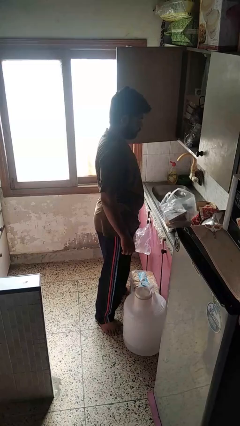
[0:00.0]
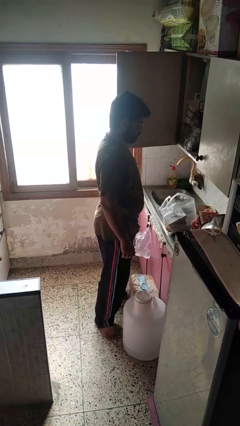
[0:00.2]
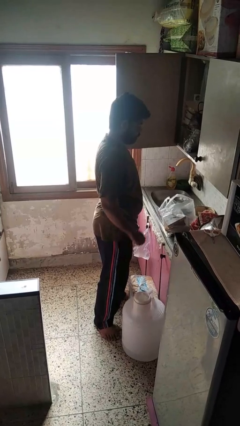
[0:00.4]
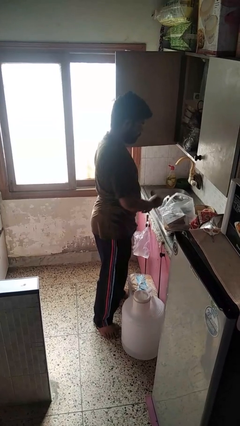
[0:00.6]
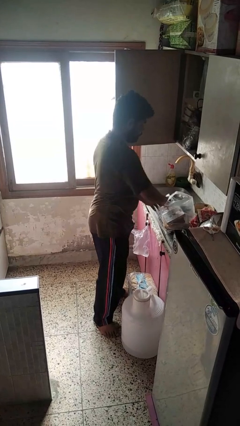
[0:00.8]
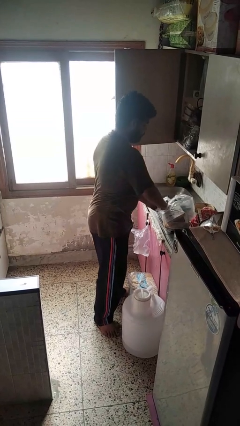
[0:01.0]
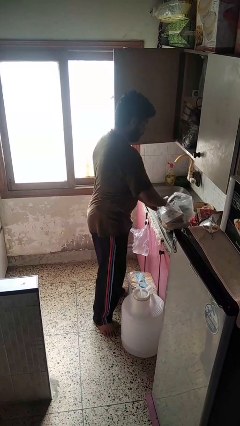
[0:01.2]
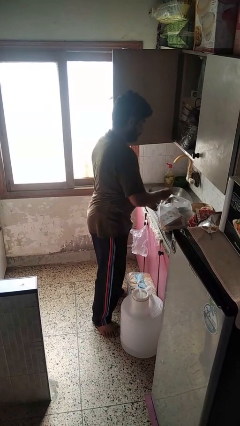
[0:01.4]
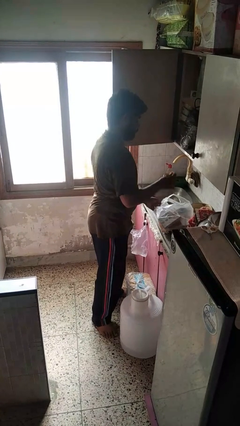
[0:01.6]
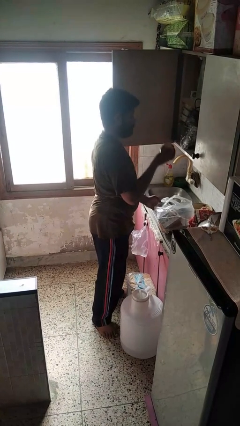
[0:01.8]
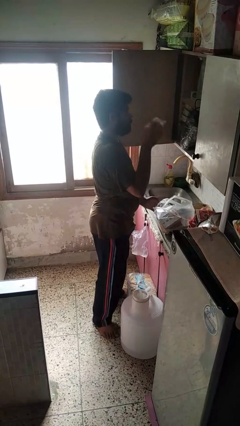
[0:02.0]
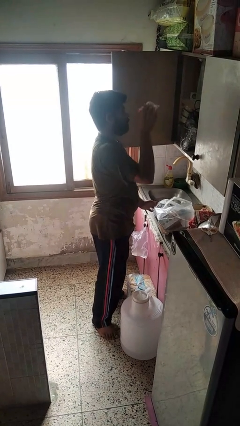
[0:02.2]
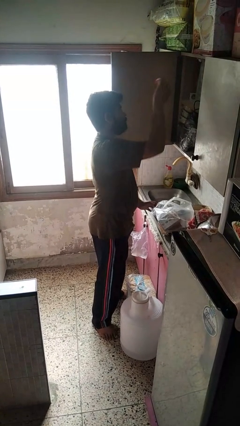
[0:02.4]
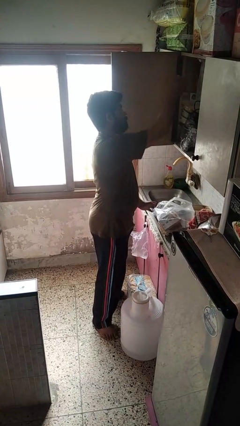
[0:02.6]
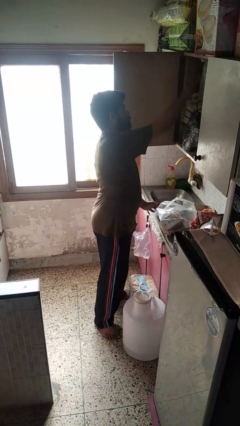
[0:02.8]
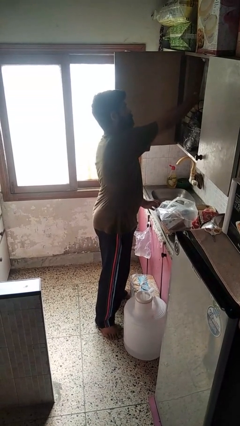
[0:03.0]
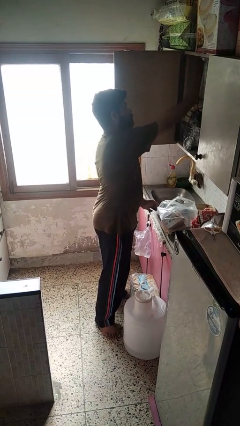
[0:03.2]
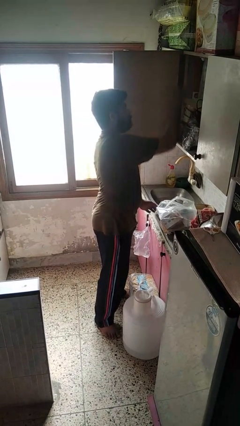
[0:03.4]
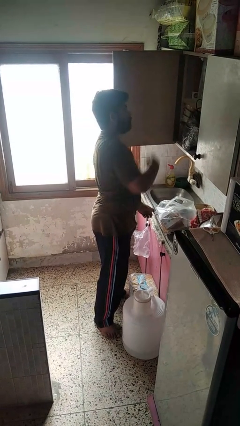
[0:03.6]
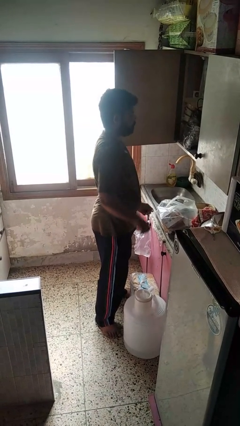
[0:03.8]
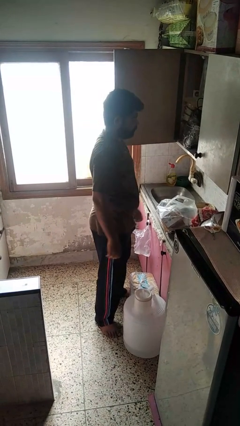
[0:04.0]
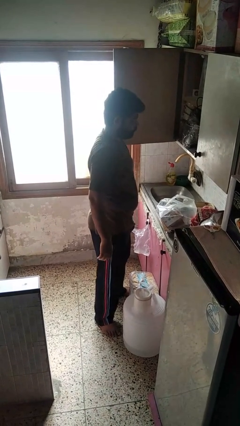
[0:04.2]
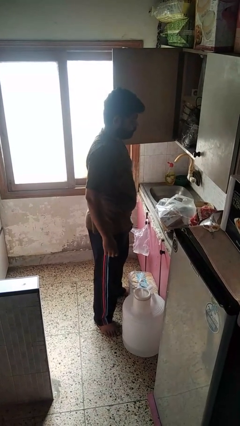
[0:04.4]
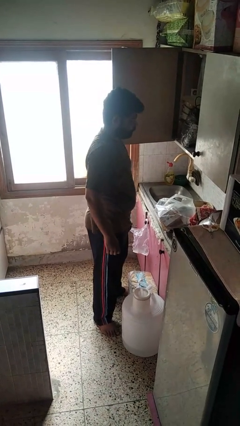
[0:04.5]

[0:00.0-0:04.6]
person loads groceries into cabinet

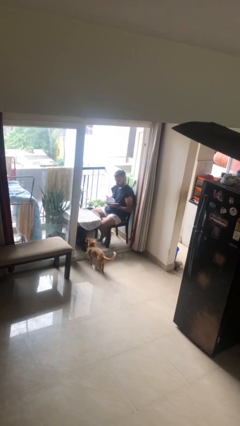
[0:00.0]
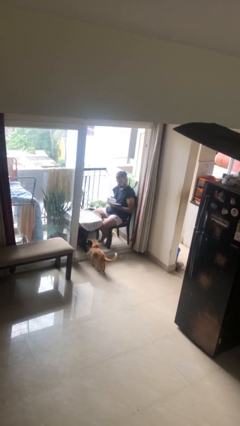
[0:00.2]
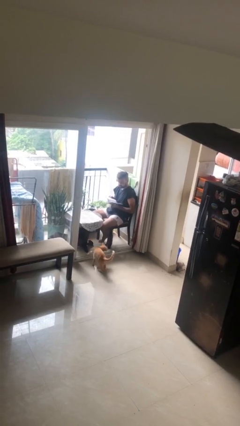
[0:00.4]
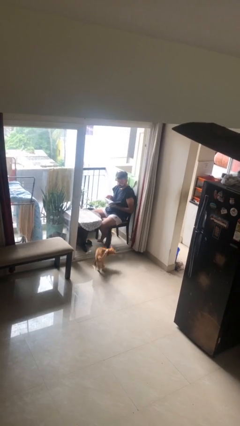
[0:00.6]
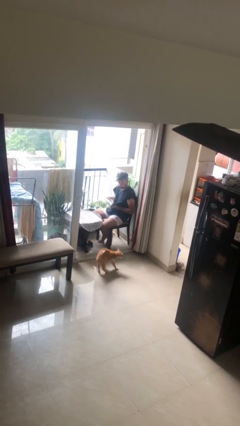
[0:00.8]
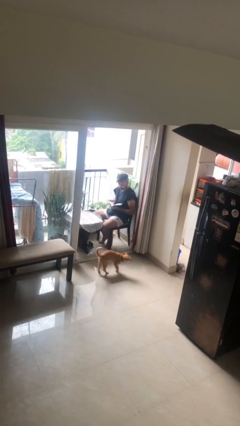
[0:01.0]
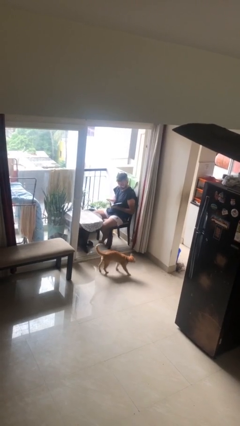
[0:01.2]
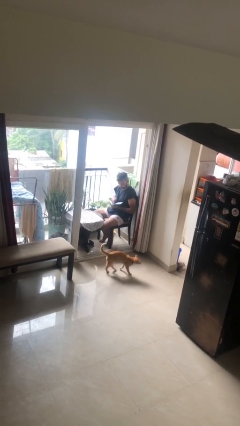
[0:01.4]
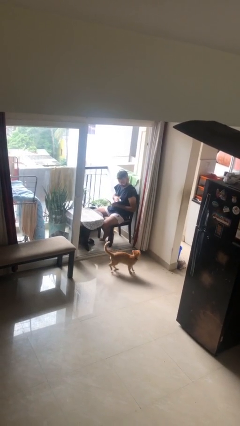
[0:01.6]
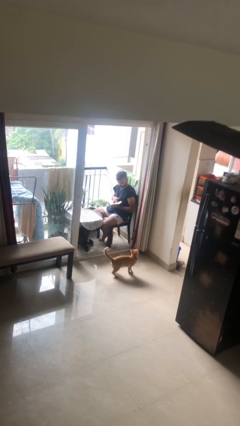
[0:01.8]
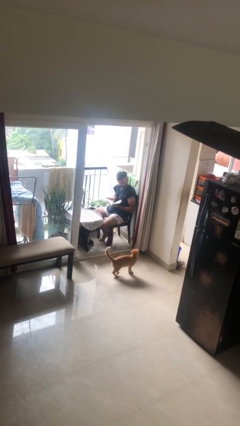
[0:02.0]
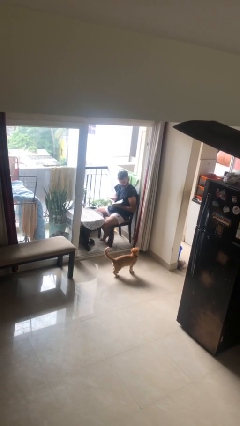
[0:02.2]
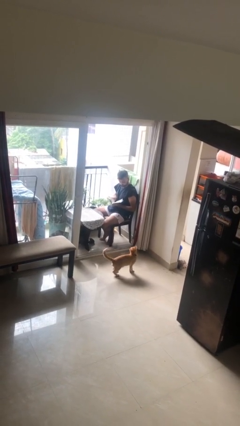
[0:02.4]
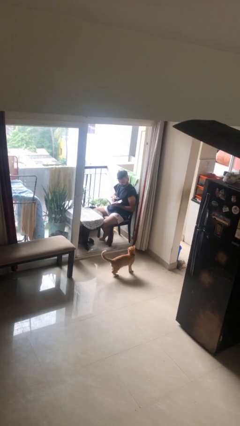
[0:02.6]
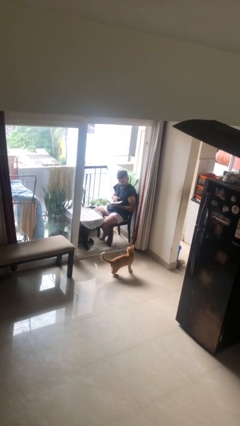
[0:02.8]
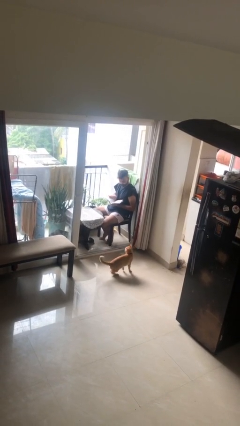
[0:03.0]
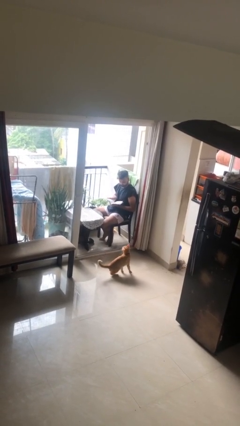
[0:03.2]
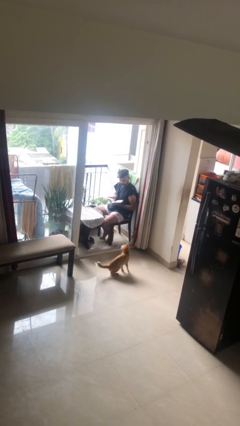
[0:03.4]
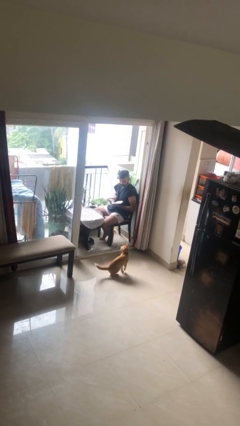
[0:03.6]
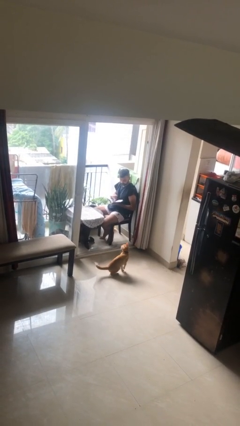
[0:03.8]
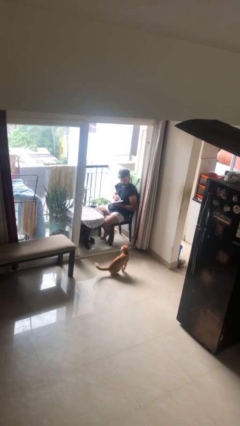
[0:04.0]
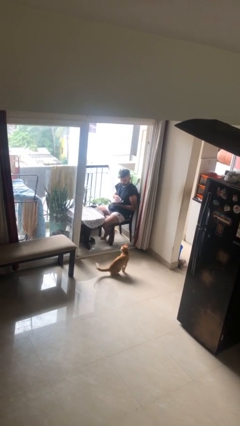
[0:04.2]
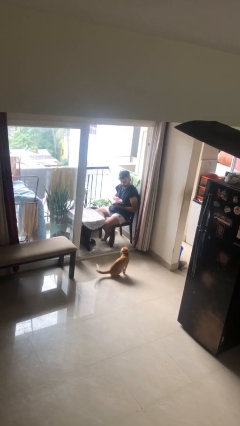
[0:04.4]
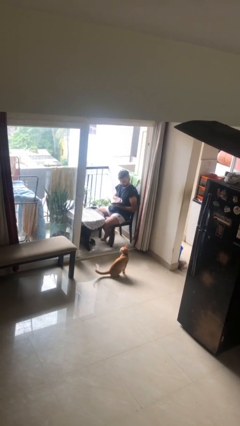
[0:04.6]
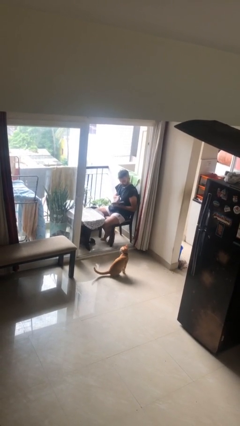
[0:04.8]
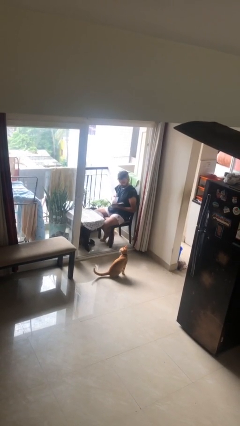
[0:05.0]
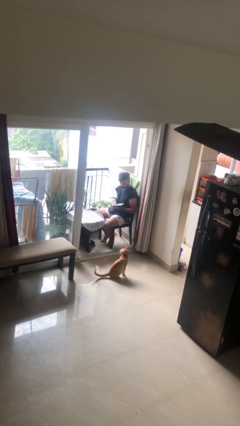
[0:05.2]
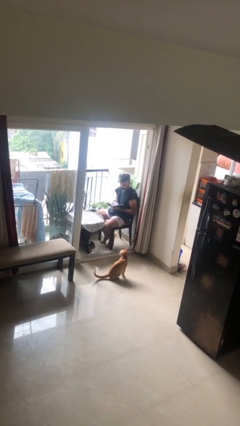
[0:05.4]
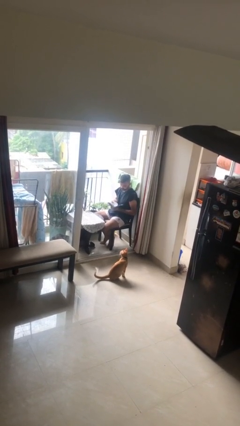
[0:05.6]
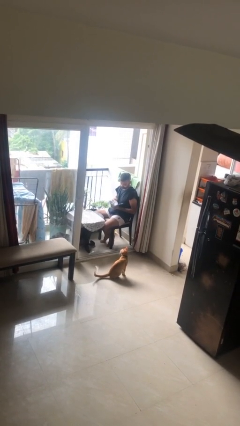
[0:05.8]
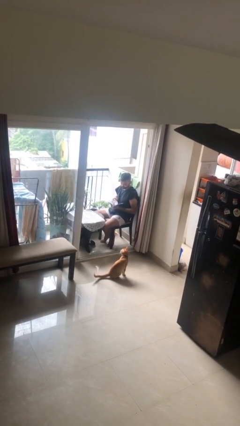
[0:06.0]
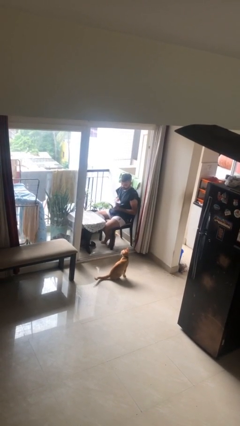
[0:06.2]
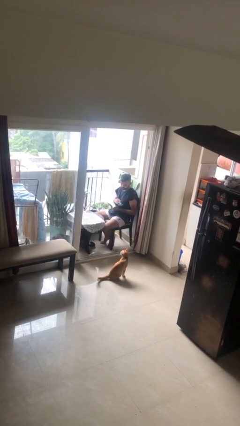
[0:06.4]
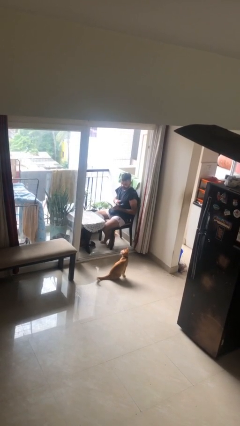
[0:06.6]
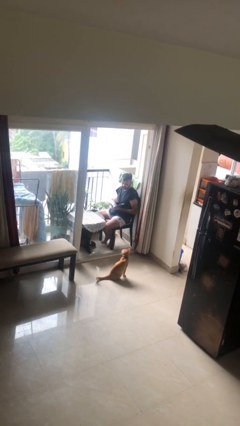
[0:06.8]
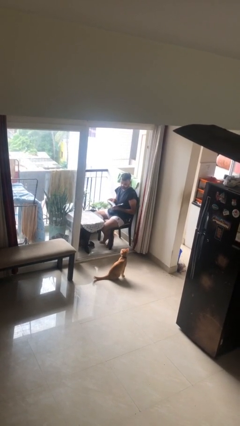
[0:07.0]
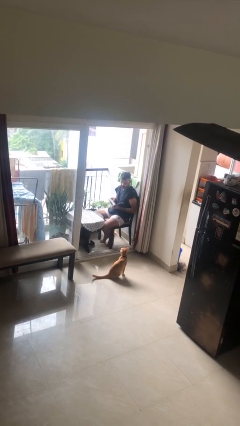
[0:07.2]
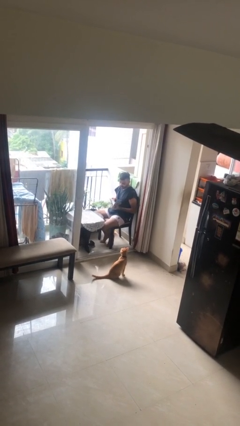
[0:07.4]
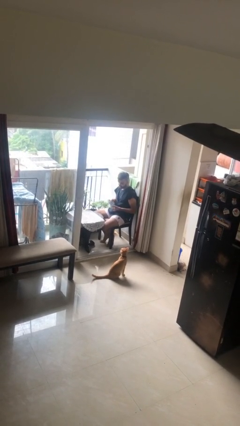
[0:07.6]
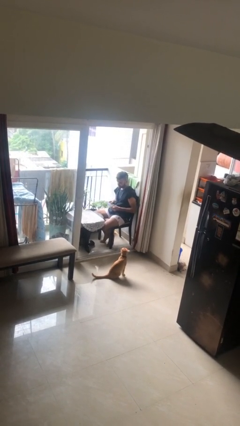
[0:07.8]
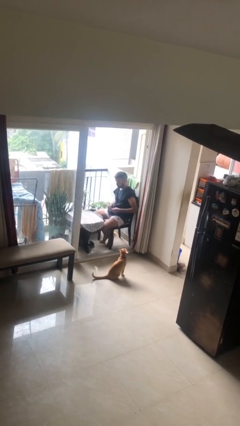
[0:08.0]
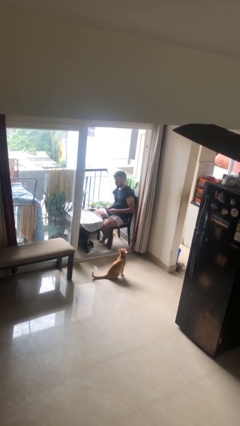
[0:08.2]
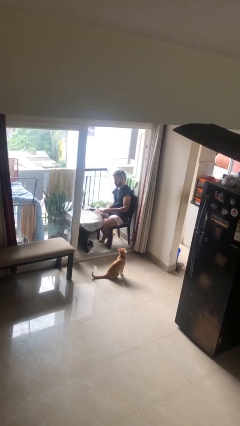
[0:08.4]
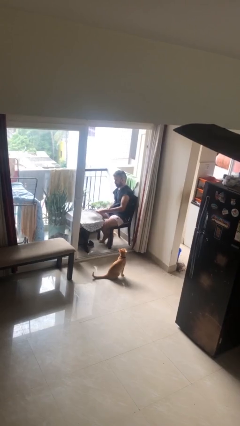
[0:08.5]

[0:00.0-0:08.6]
person reads document

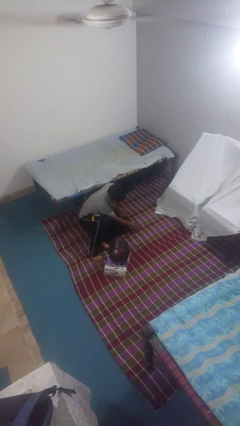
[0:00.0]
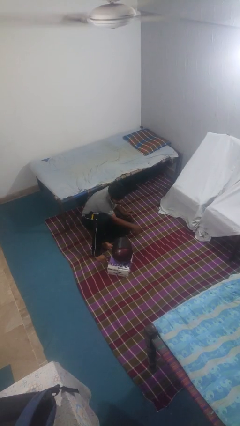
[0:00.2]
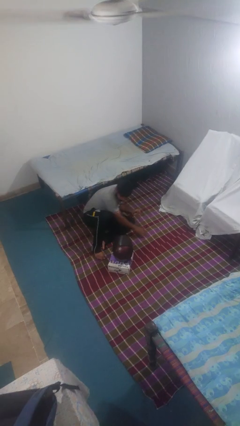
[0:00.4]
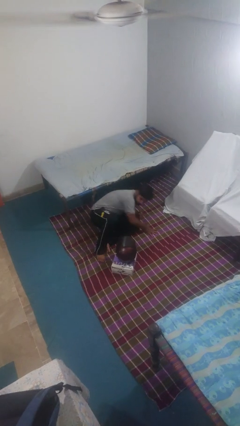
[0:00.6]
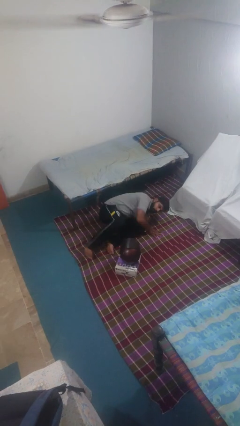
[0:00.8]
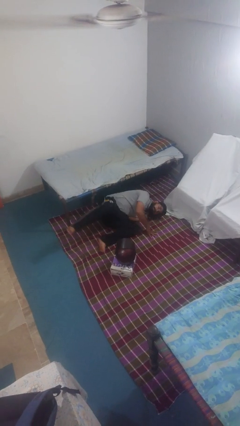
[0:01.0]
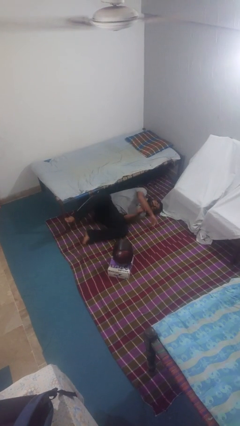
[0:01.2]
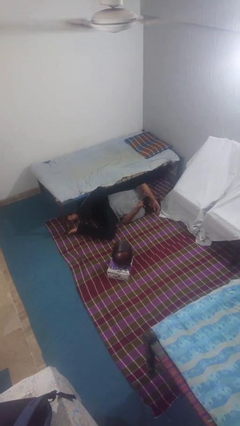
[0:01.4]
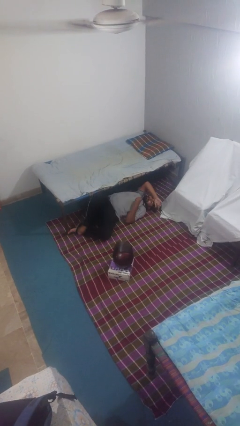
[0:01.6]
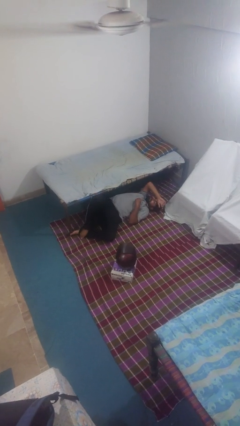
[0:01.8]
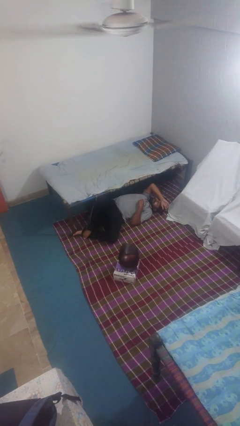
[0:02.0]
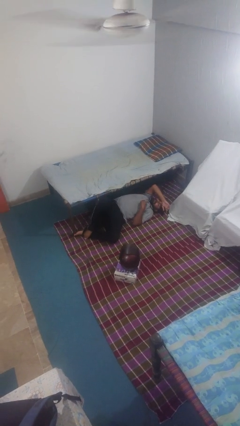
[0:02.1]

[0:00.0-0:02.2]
person lies down on floor

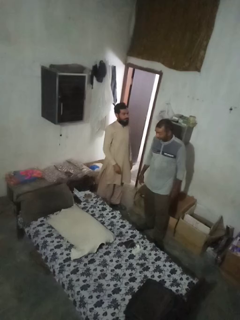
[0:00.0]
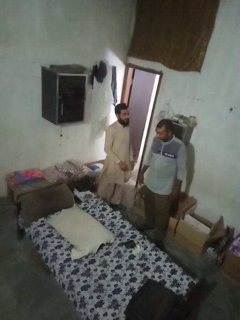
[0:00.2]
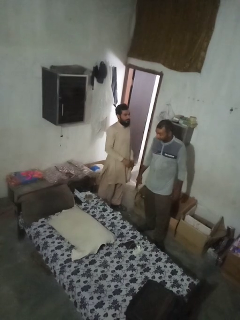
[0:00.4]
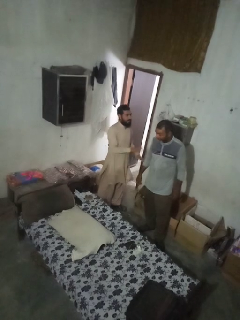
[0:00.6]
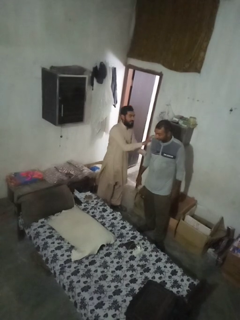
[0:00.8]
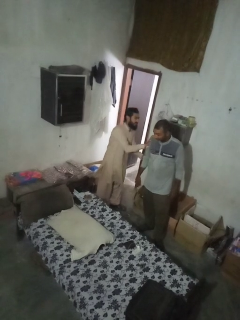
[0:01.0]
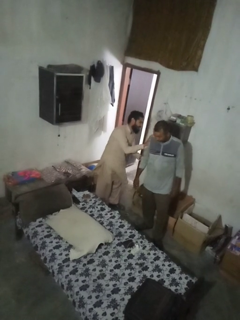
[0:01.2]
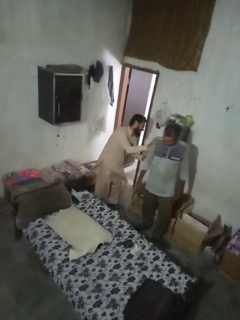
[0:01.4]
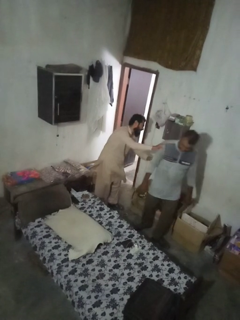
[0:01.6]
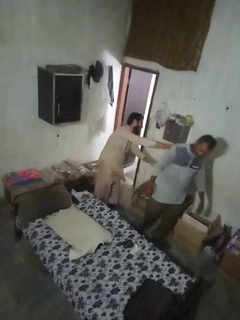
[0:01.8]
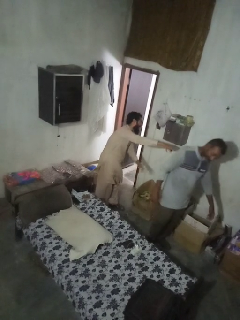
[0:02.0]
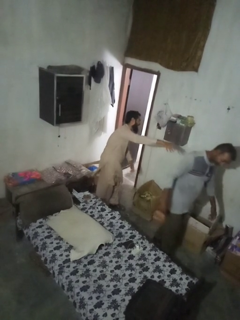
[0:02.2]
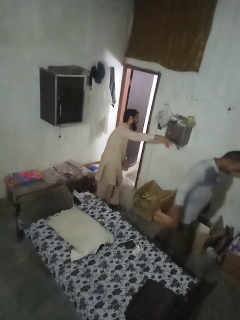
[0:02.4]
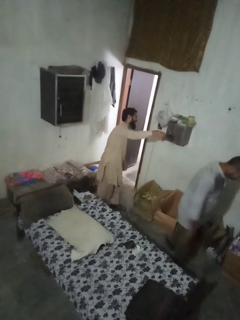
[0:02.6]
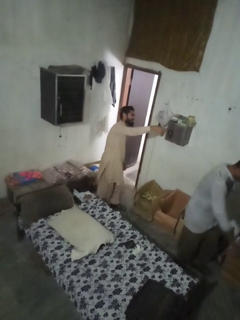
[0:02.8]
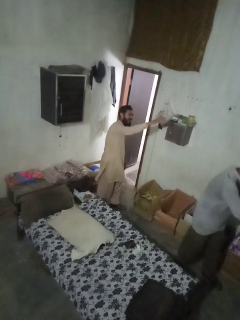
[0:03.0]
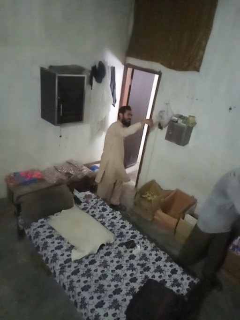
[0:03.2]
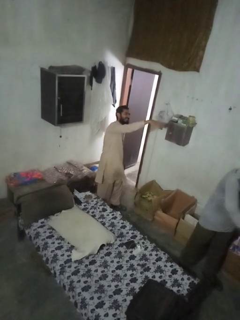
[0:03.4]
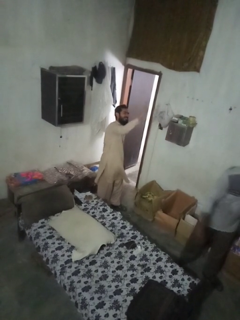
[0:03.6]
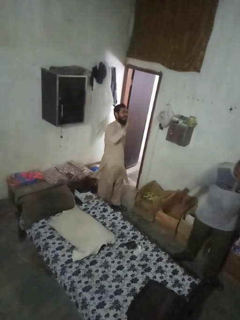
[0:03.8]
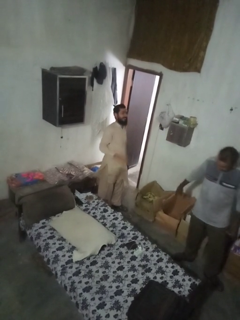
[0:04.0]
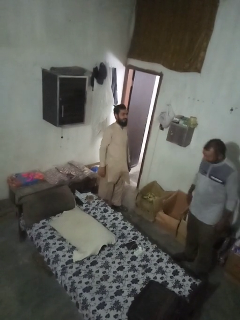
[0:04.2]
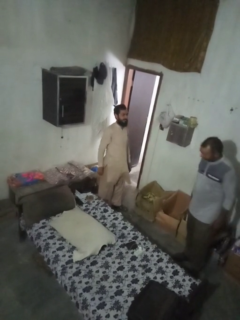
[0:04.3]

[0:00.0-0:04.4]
person shoves person
